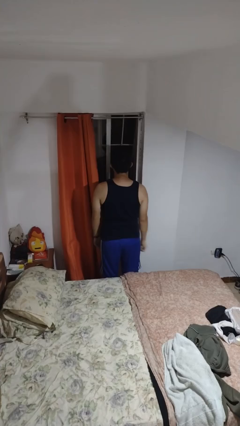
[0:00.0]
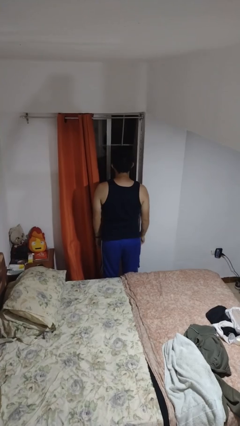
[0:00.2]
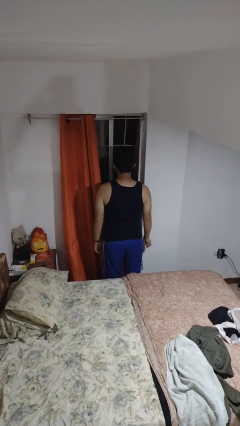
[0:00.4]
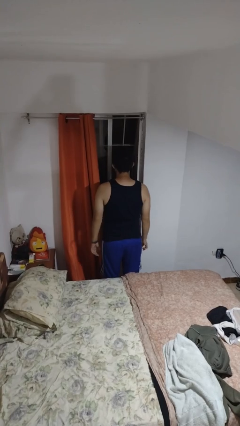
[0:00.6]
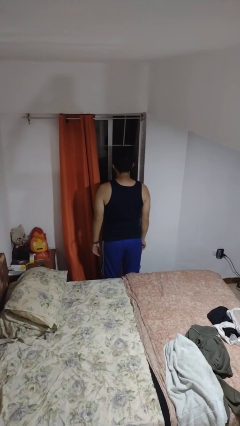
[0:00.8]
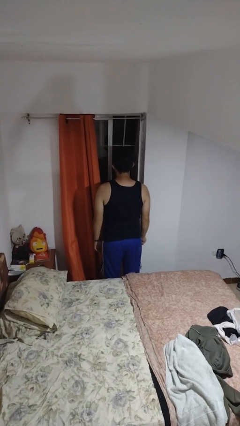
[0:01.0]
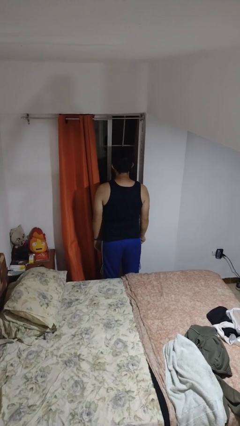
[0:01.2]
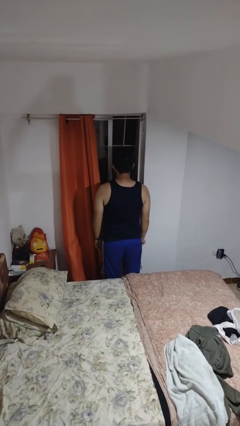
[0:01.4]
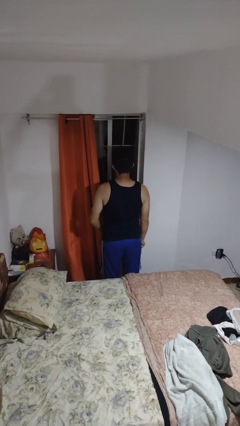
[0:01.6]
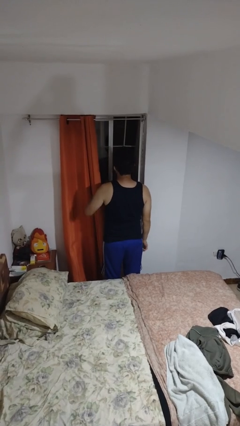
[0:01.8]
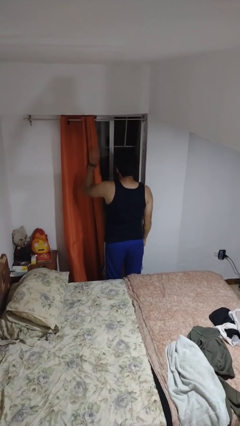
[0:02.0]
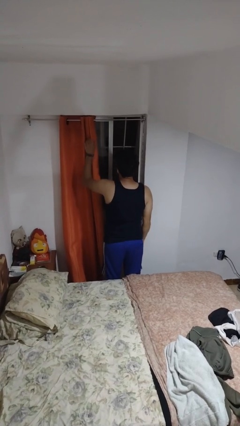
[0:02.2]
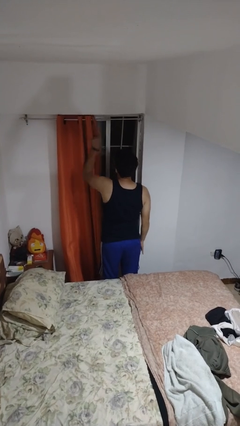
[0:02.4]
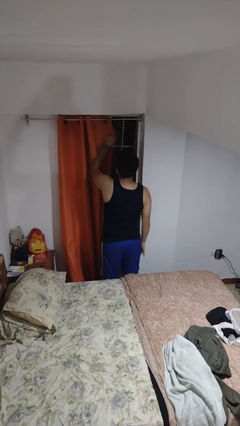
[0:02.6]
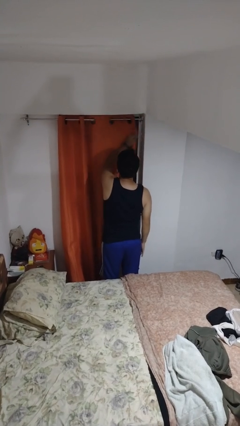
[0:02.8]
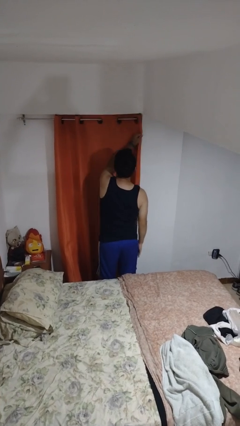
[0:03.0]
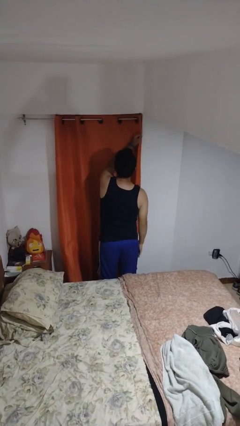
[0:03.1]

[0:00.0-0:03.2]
person closes curtains

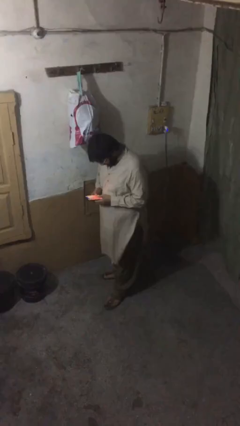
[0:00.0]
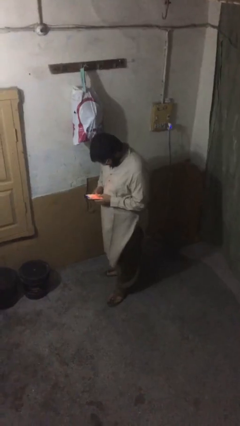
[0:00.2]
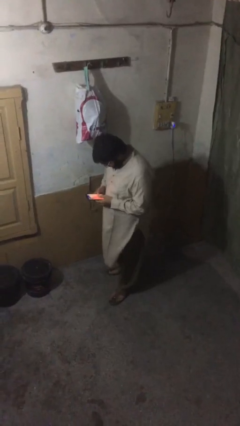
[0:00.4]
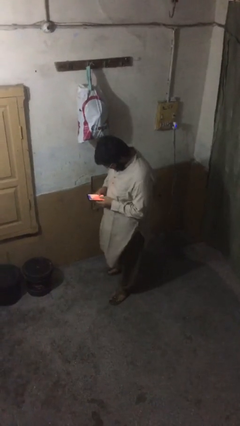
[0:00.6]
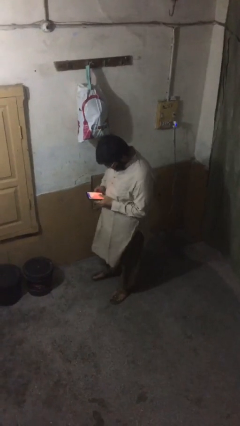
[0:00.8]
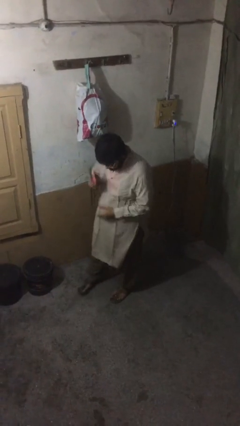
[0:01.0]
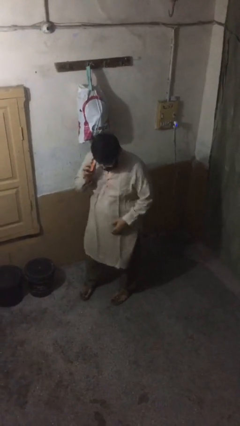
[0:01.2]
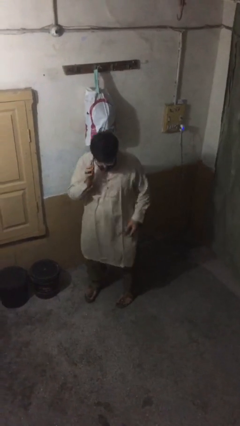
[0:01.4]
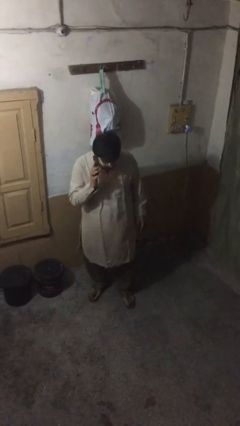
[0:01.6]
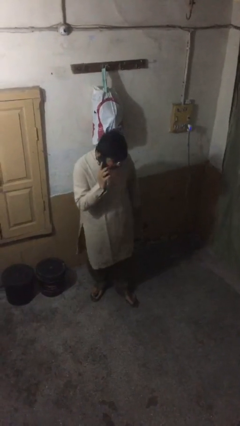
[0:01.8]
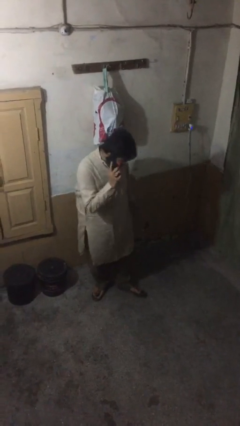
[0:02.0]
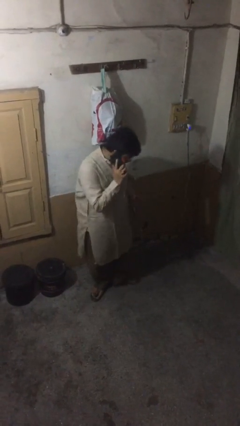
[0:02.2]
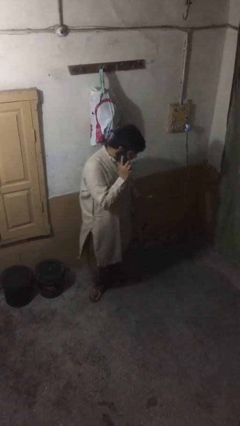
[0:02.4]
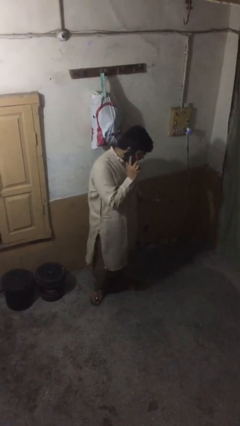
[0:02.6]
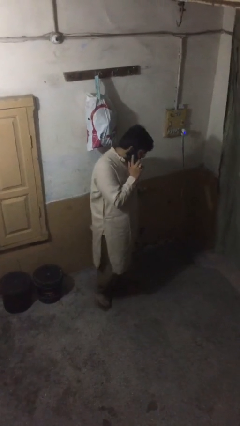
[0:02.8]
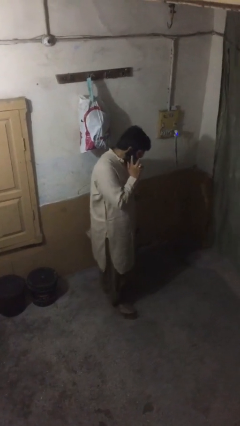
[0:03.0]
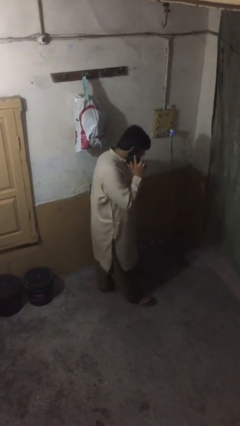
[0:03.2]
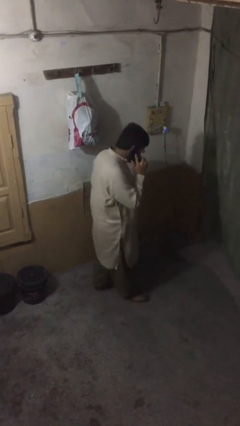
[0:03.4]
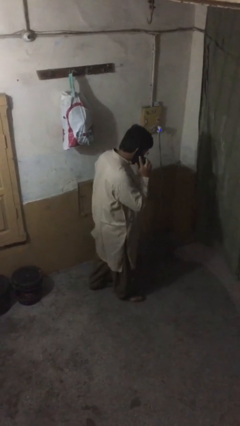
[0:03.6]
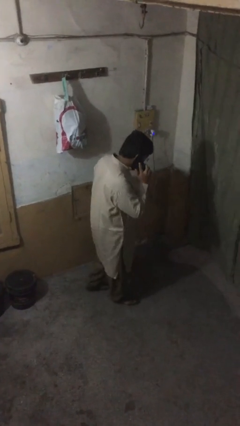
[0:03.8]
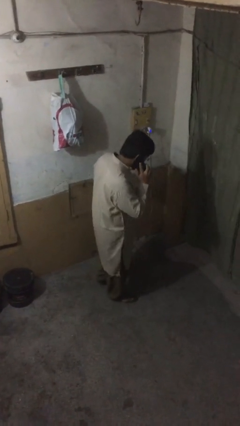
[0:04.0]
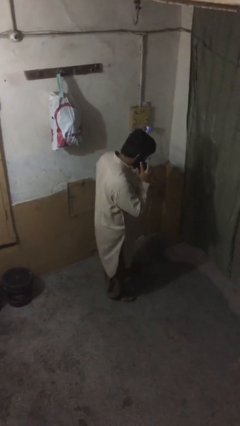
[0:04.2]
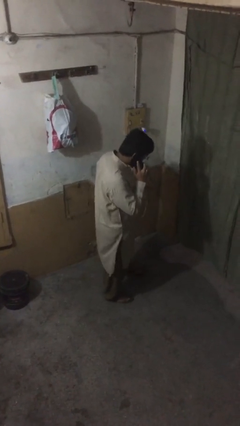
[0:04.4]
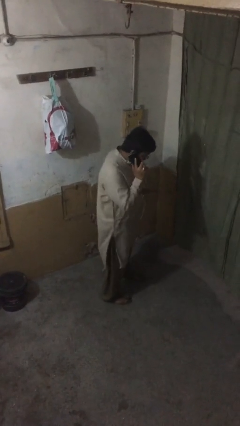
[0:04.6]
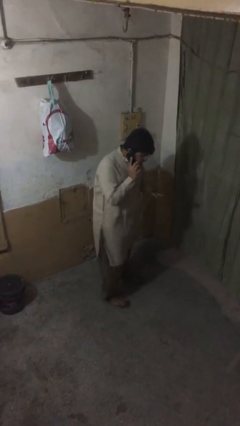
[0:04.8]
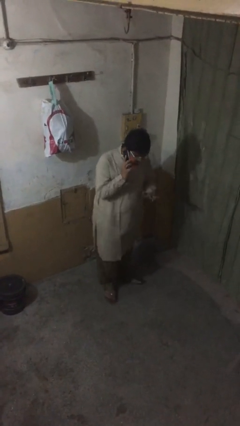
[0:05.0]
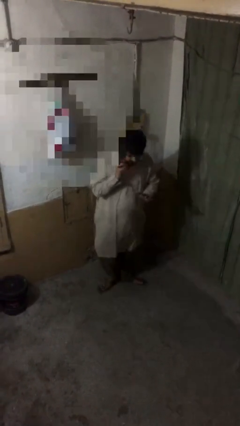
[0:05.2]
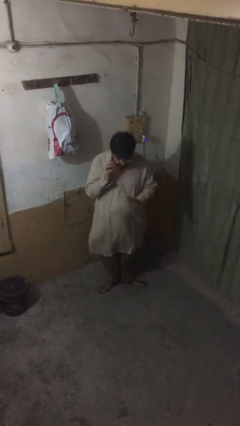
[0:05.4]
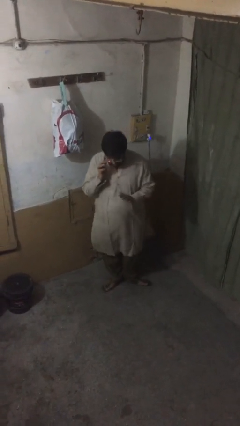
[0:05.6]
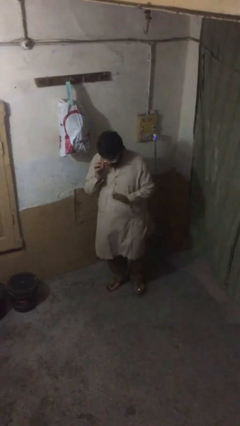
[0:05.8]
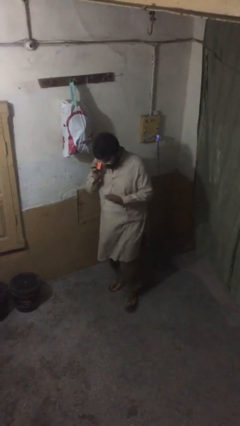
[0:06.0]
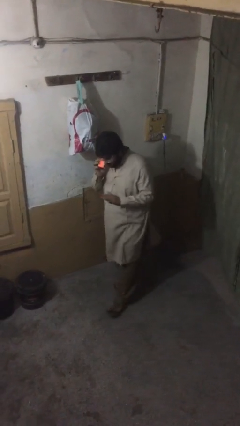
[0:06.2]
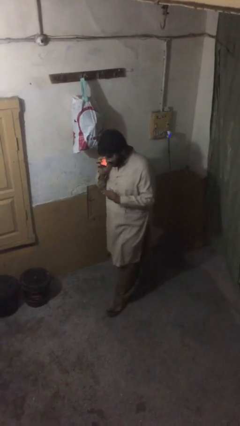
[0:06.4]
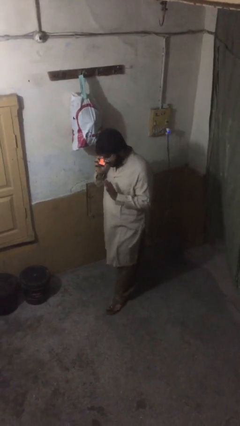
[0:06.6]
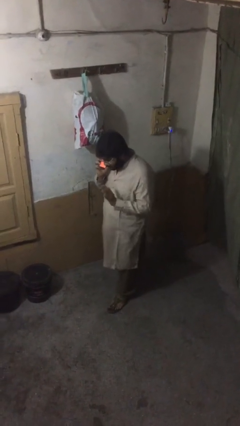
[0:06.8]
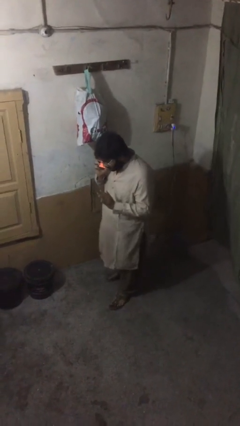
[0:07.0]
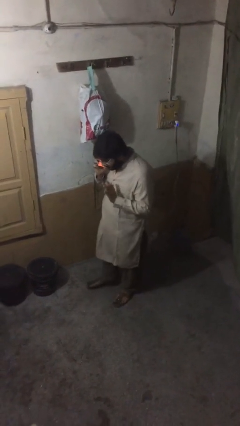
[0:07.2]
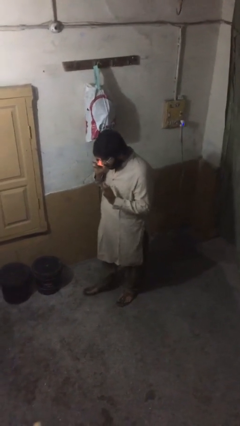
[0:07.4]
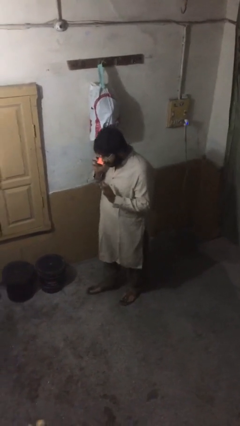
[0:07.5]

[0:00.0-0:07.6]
person talks on phone

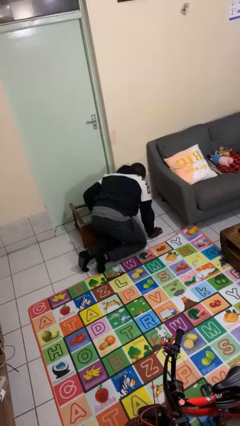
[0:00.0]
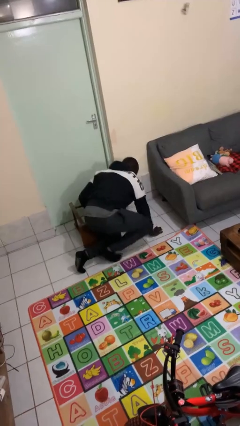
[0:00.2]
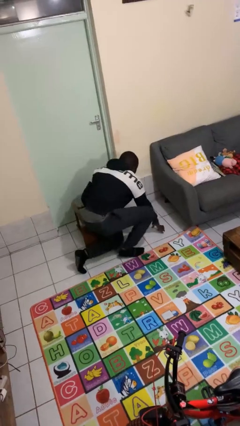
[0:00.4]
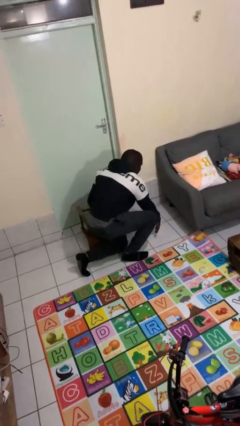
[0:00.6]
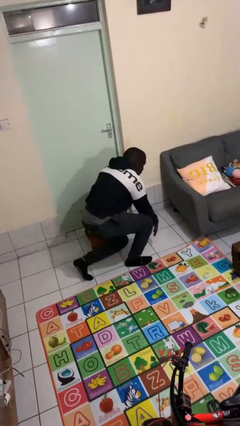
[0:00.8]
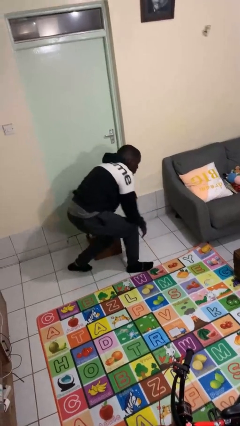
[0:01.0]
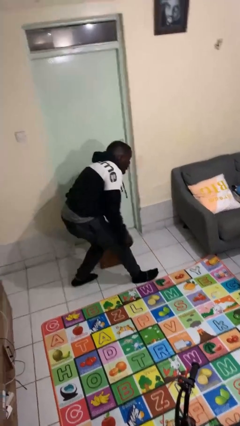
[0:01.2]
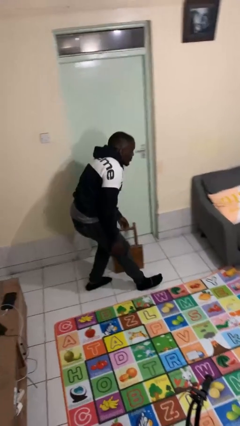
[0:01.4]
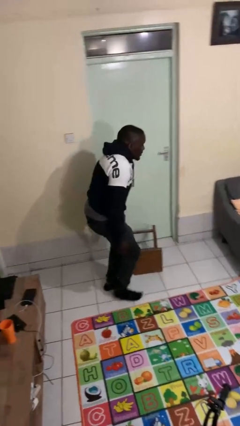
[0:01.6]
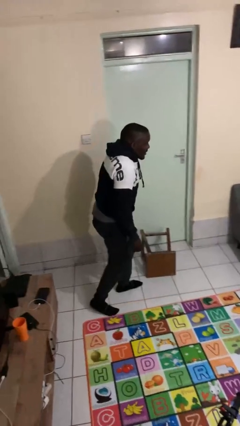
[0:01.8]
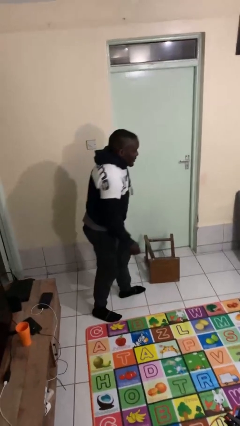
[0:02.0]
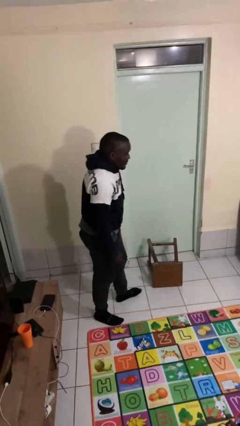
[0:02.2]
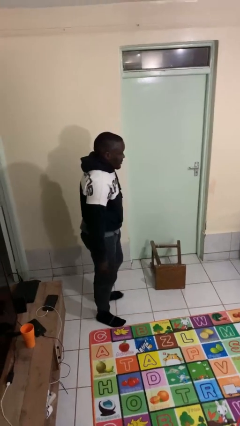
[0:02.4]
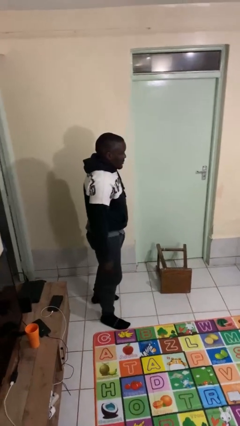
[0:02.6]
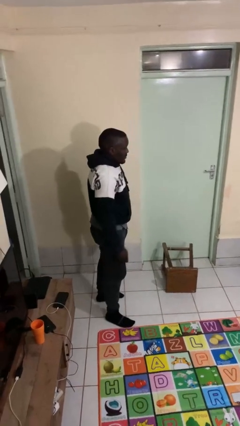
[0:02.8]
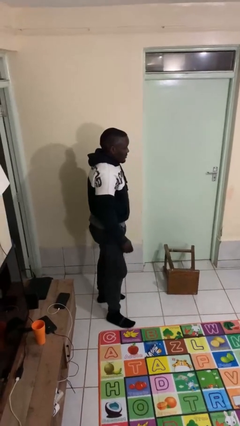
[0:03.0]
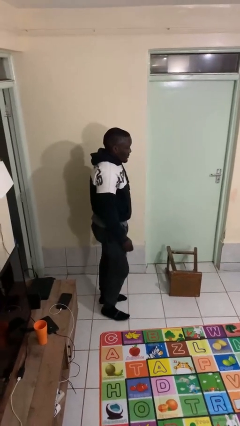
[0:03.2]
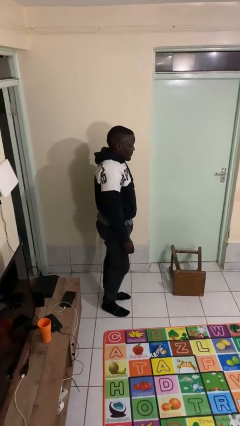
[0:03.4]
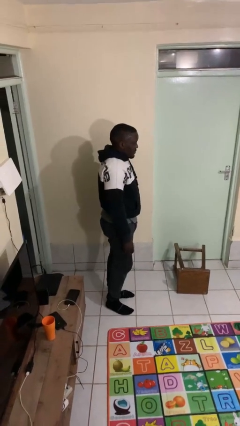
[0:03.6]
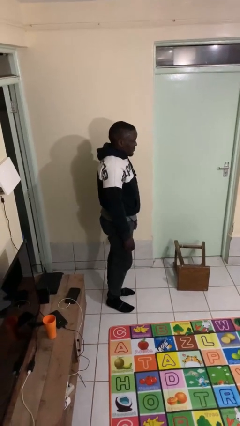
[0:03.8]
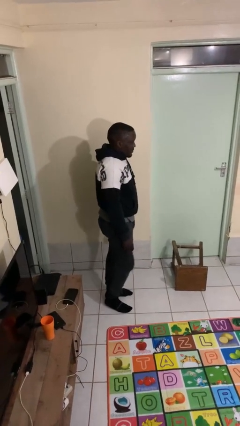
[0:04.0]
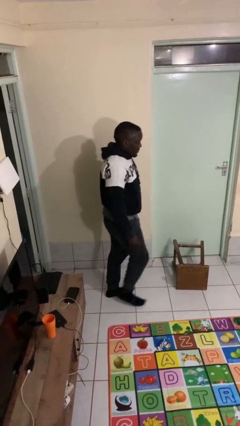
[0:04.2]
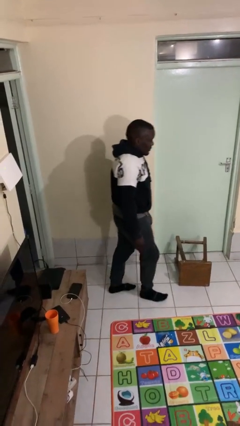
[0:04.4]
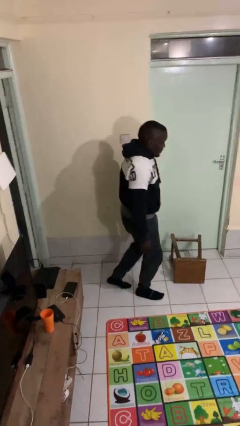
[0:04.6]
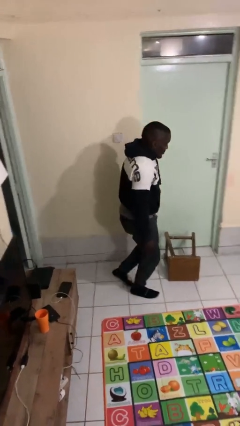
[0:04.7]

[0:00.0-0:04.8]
person stands up from floor

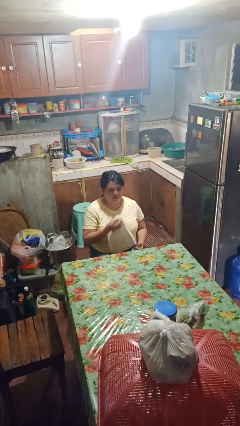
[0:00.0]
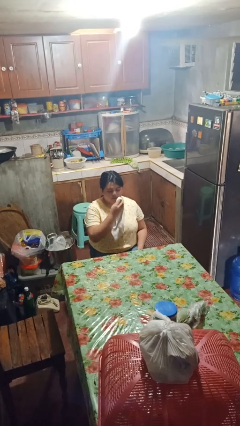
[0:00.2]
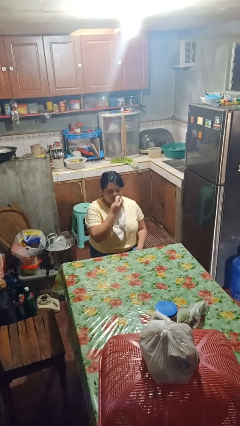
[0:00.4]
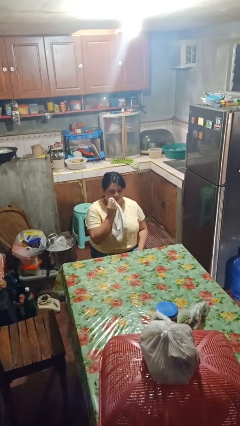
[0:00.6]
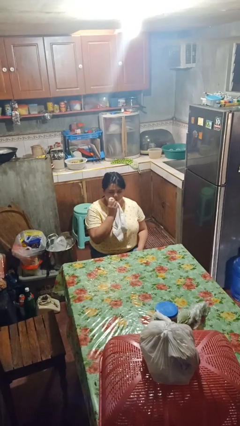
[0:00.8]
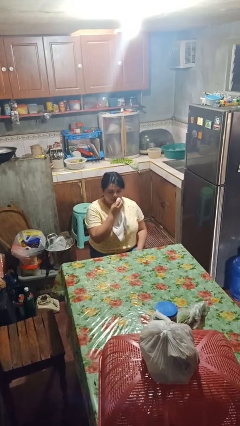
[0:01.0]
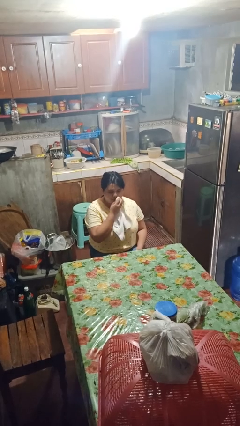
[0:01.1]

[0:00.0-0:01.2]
person wipes mouth with napkin

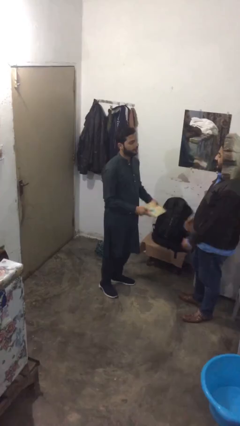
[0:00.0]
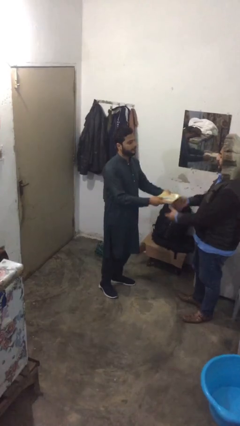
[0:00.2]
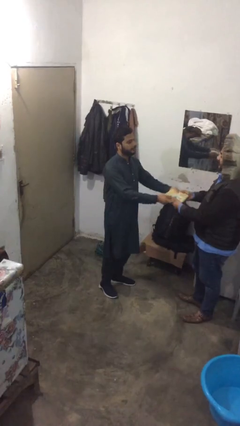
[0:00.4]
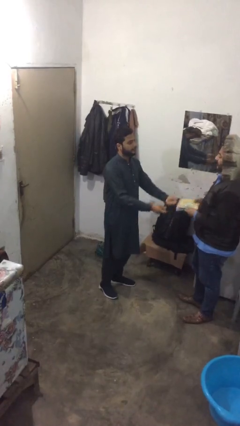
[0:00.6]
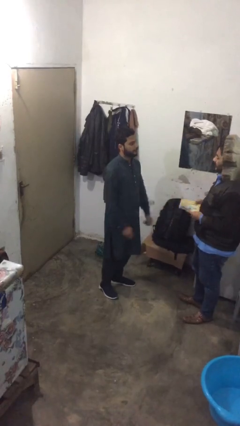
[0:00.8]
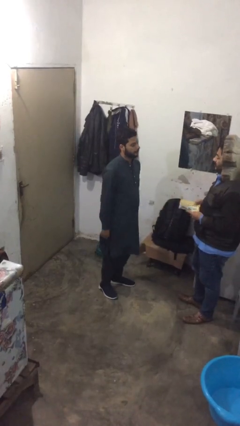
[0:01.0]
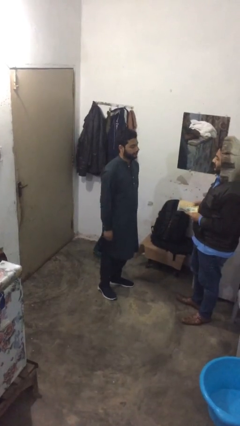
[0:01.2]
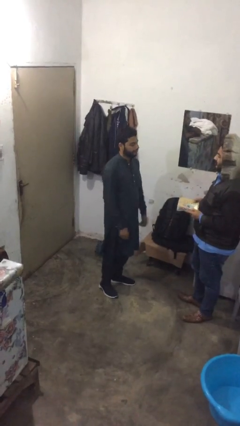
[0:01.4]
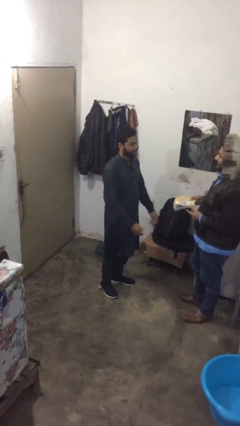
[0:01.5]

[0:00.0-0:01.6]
person transfers object to person
